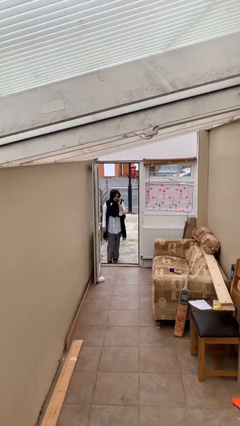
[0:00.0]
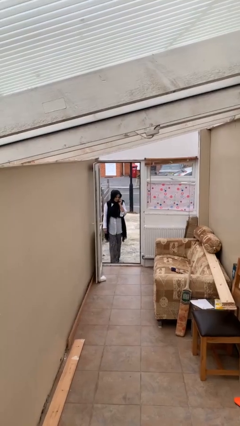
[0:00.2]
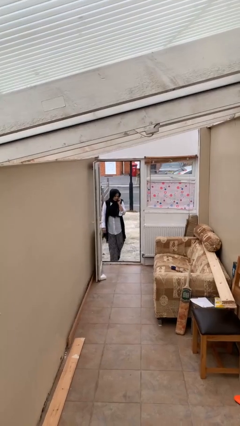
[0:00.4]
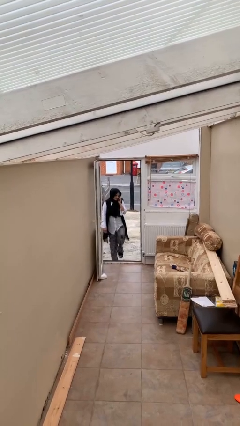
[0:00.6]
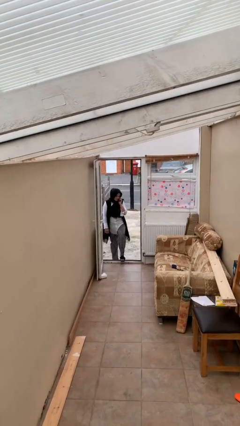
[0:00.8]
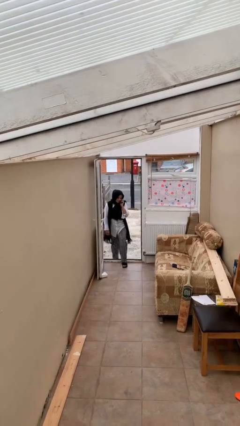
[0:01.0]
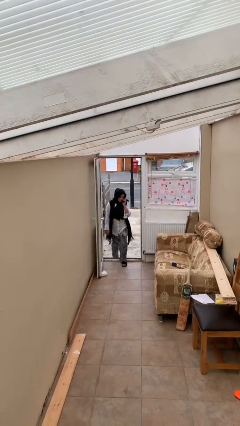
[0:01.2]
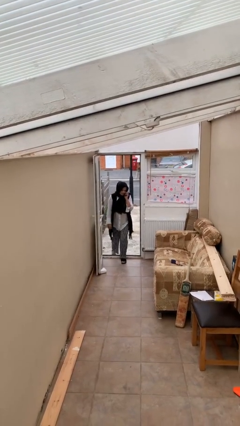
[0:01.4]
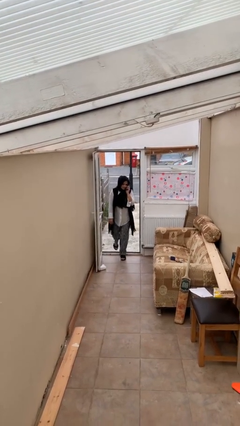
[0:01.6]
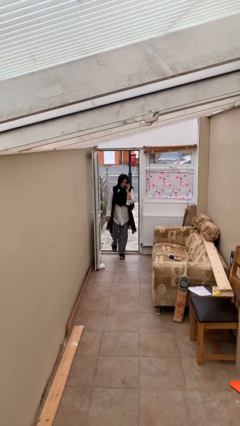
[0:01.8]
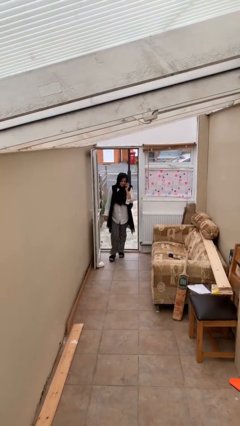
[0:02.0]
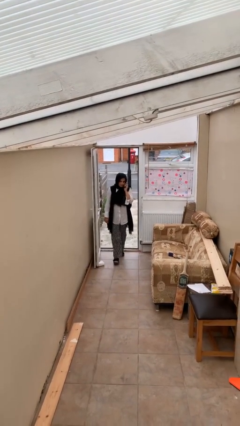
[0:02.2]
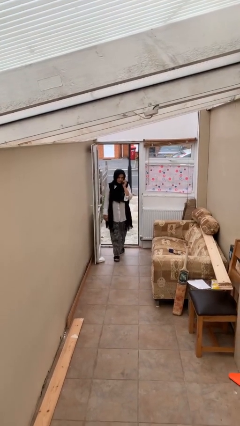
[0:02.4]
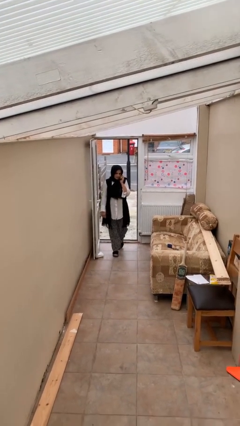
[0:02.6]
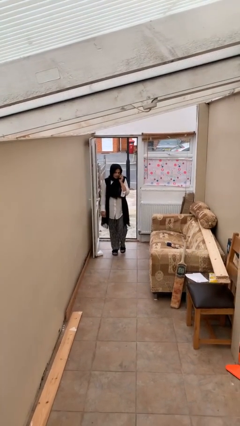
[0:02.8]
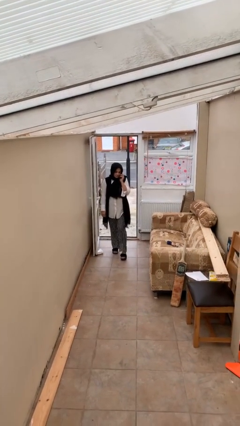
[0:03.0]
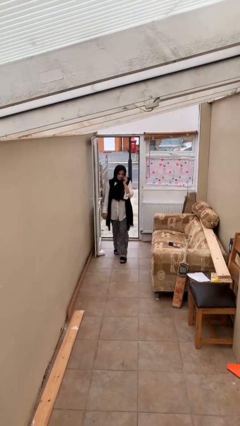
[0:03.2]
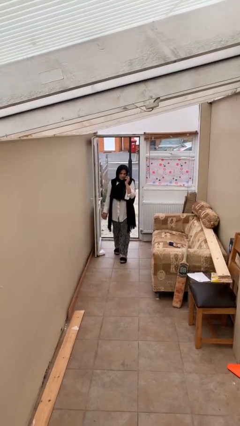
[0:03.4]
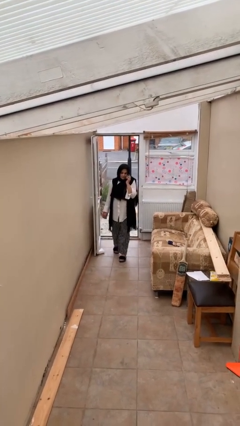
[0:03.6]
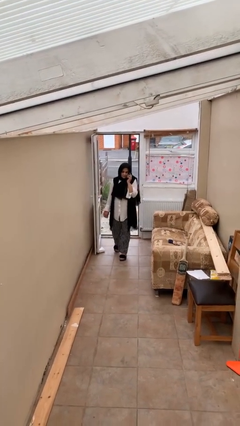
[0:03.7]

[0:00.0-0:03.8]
person enters scene through structure

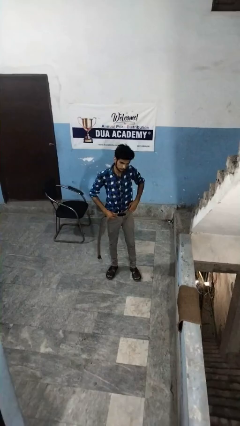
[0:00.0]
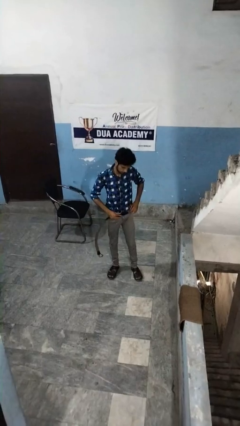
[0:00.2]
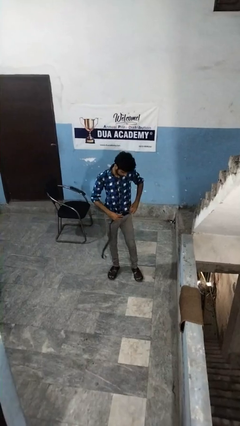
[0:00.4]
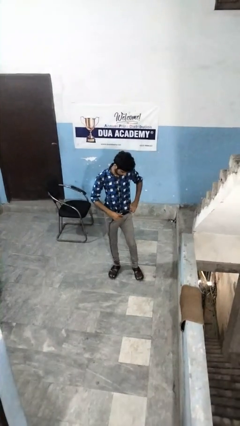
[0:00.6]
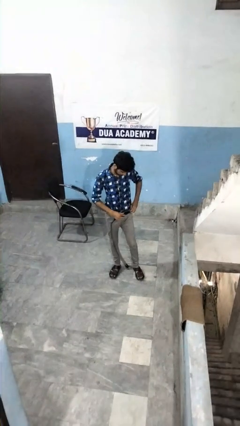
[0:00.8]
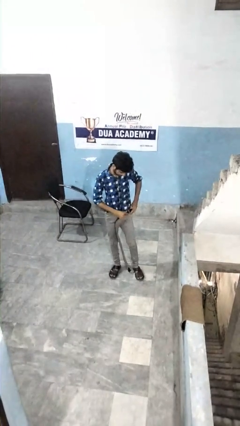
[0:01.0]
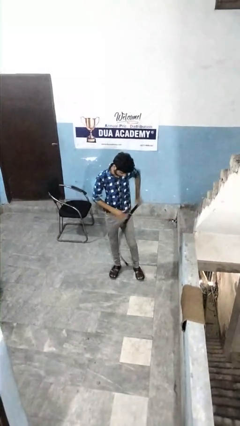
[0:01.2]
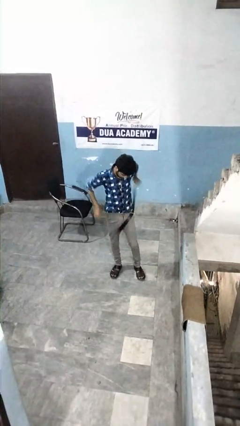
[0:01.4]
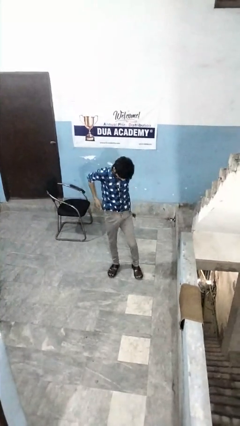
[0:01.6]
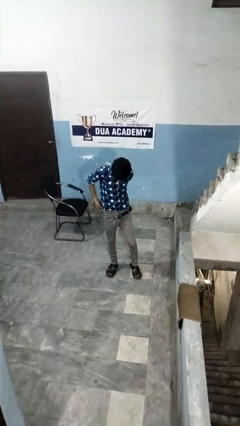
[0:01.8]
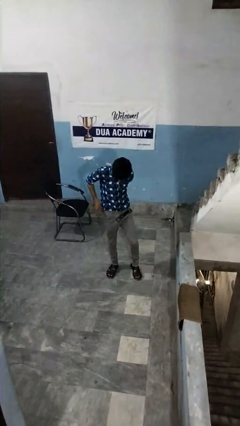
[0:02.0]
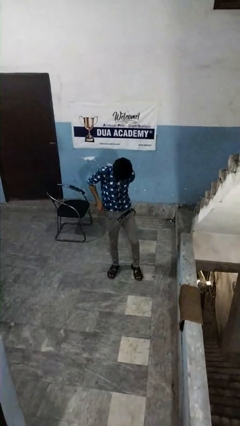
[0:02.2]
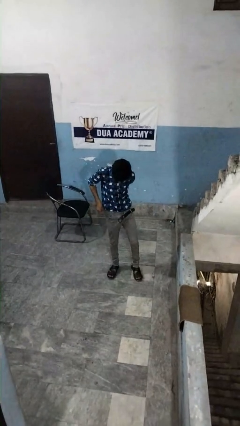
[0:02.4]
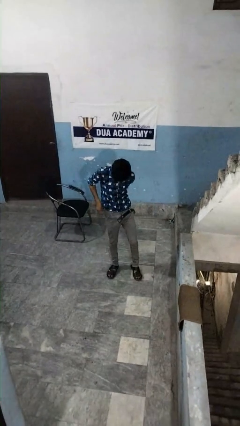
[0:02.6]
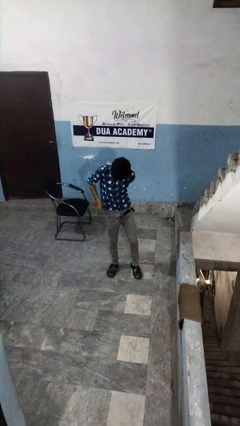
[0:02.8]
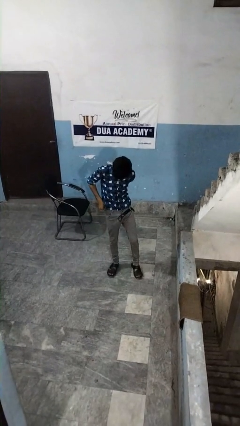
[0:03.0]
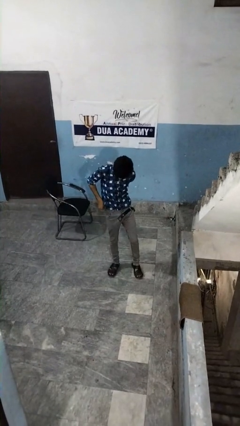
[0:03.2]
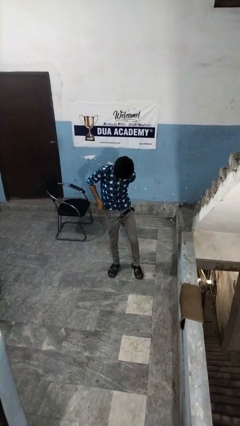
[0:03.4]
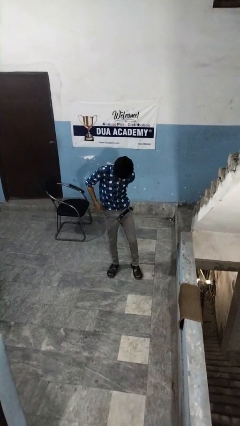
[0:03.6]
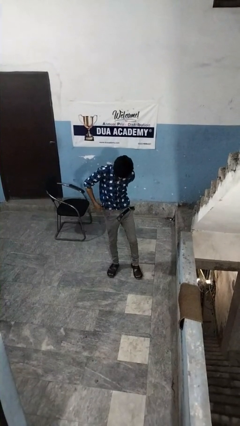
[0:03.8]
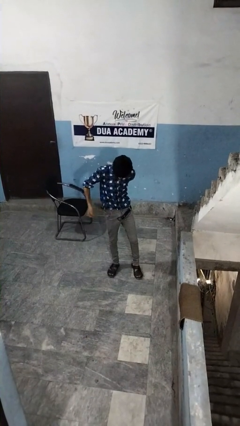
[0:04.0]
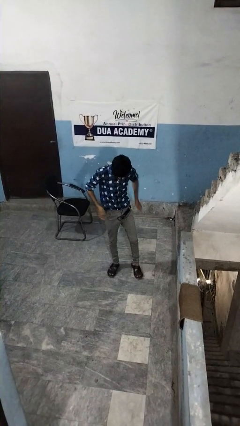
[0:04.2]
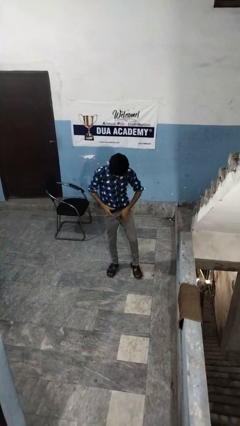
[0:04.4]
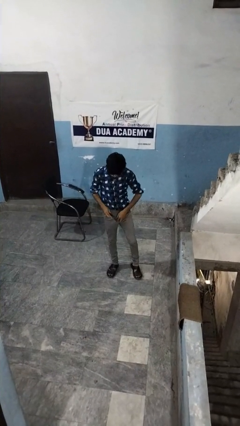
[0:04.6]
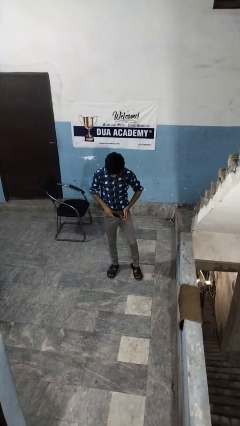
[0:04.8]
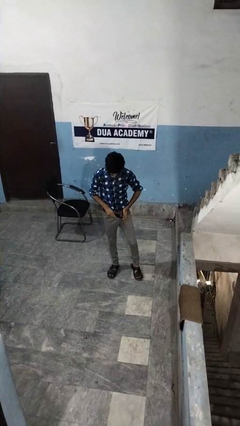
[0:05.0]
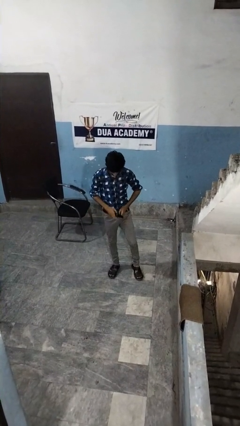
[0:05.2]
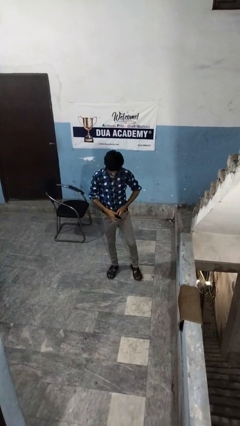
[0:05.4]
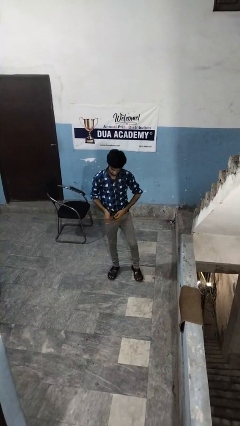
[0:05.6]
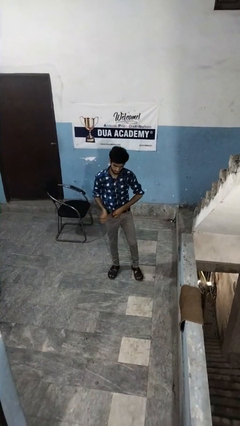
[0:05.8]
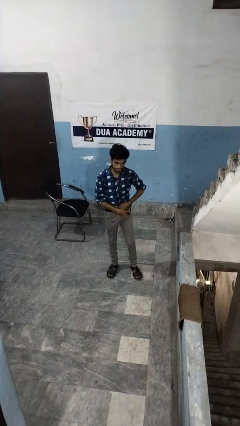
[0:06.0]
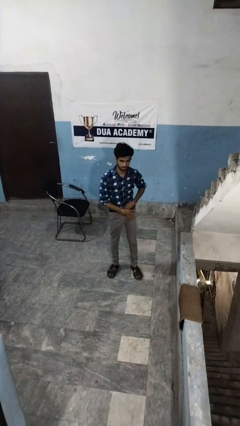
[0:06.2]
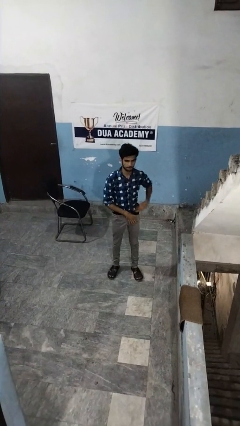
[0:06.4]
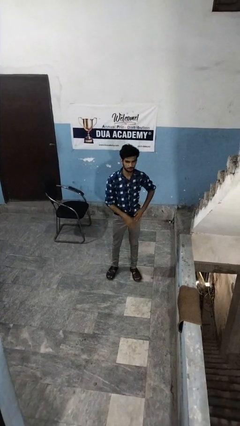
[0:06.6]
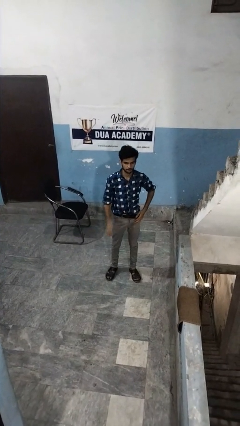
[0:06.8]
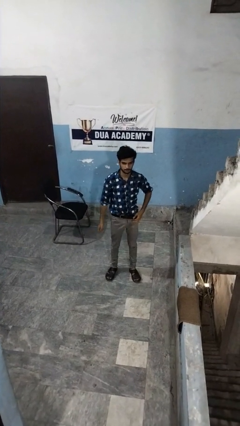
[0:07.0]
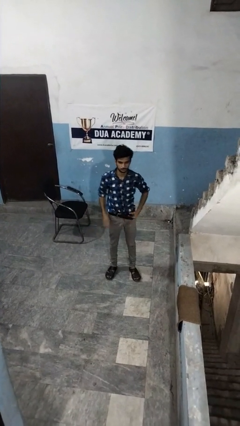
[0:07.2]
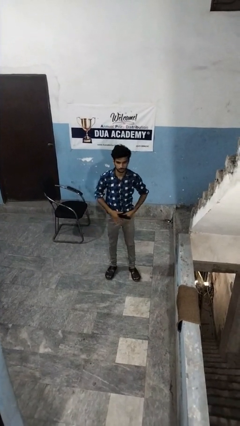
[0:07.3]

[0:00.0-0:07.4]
person puts on belt

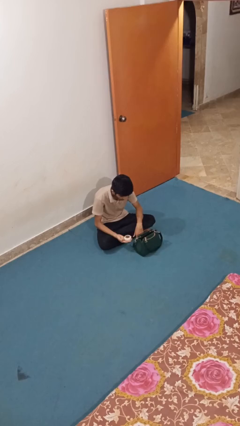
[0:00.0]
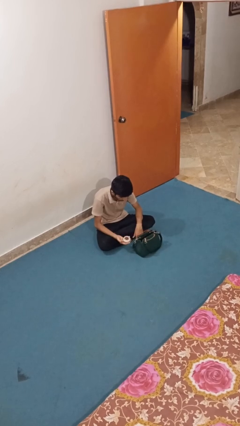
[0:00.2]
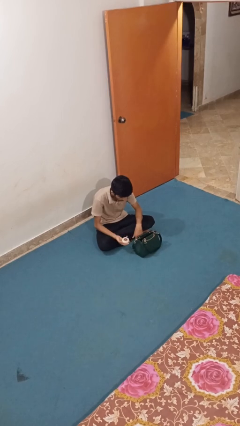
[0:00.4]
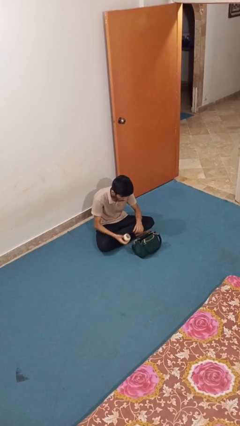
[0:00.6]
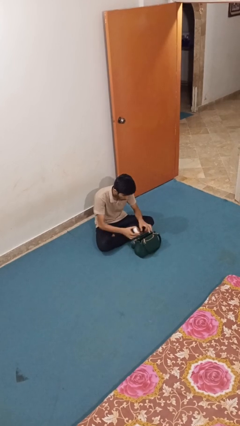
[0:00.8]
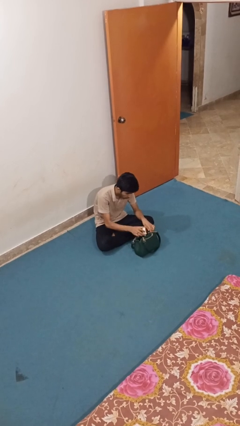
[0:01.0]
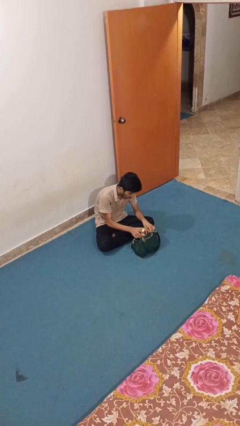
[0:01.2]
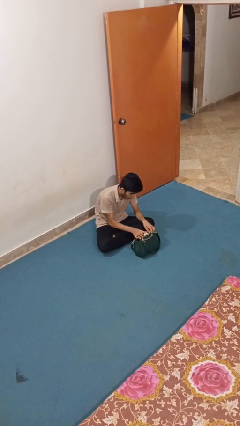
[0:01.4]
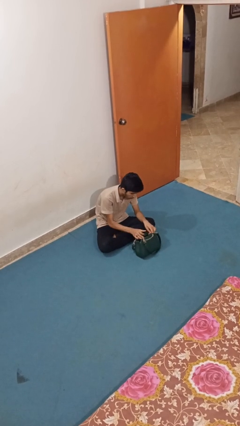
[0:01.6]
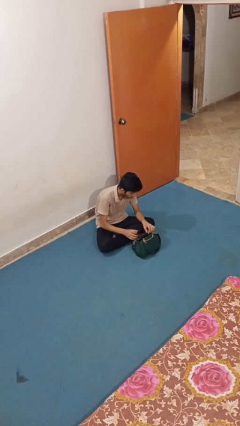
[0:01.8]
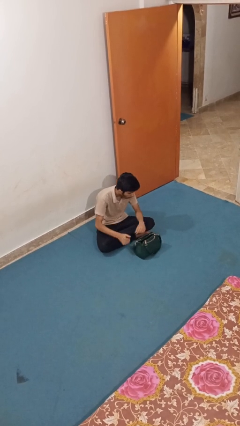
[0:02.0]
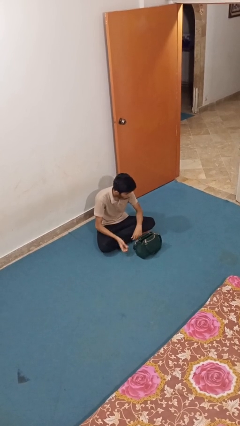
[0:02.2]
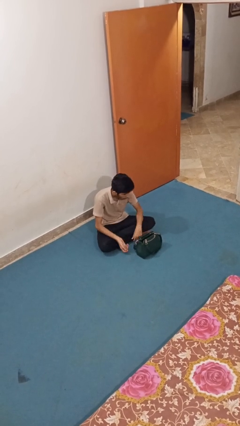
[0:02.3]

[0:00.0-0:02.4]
person puts object into purse

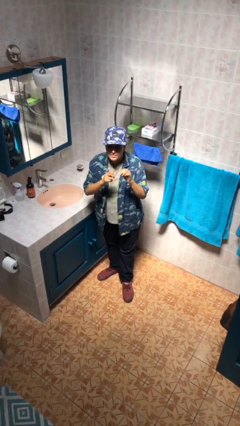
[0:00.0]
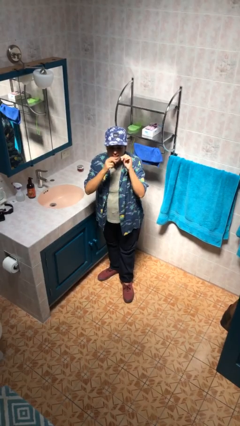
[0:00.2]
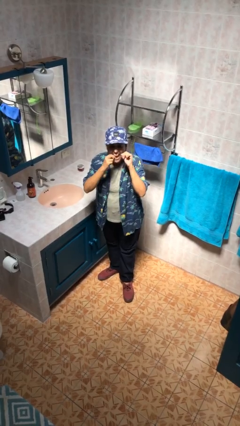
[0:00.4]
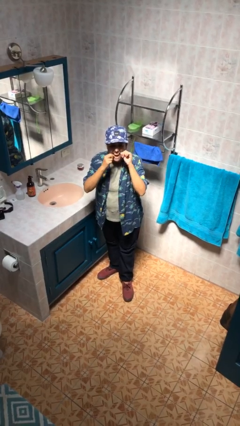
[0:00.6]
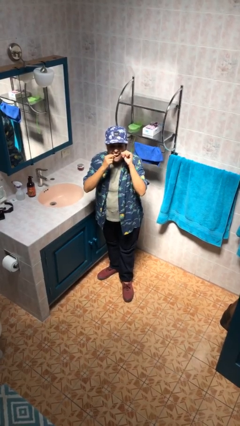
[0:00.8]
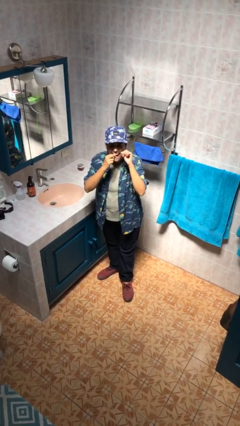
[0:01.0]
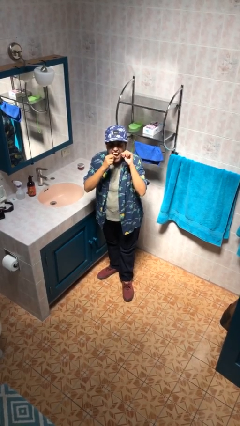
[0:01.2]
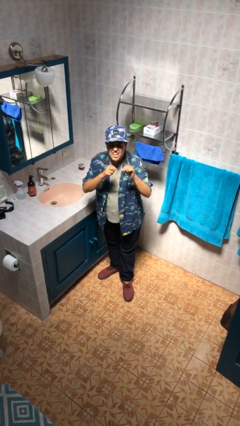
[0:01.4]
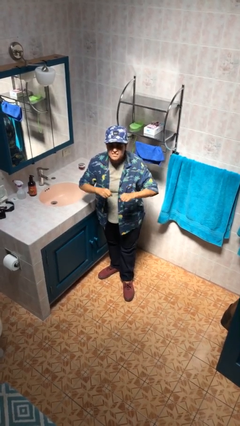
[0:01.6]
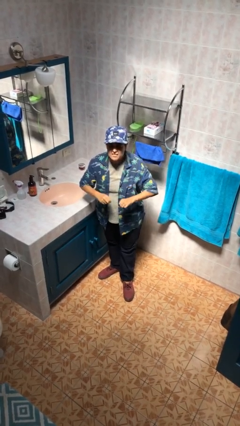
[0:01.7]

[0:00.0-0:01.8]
person flosses

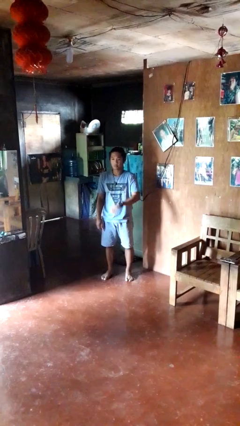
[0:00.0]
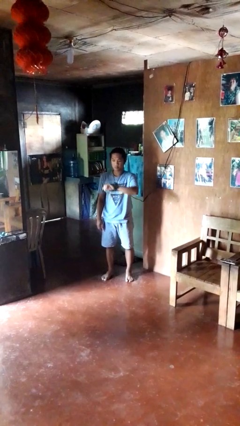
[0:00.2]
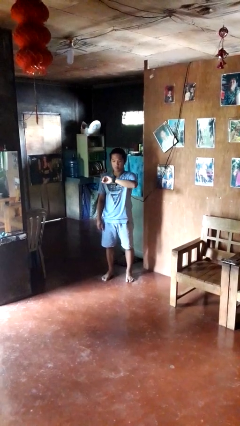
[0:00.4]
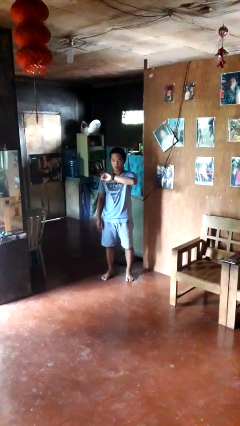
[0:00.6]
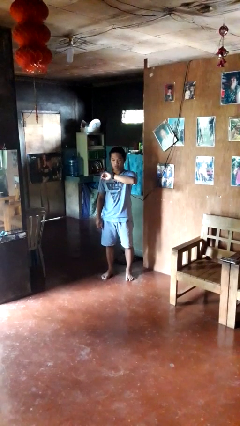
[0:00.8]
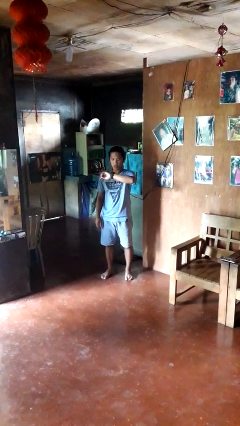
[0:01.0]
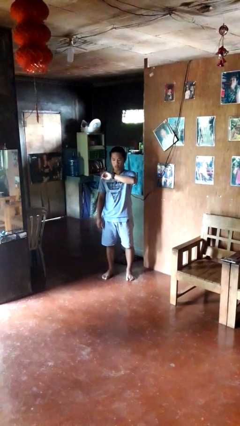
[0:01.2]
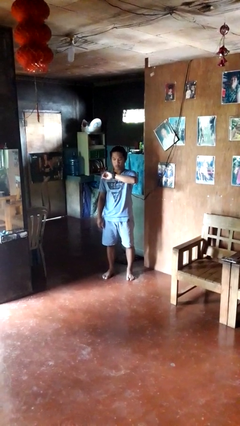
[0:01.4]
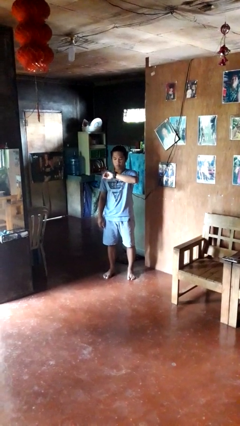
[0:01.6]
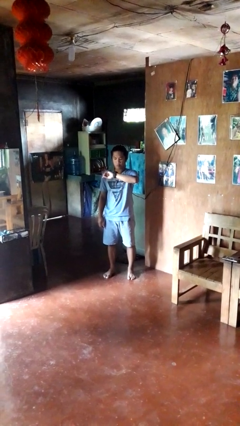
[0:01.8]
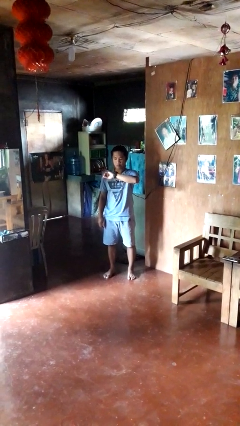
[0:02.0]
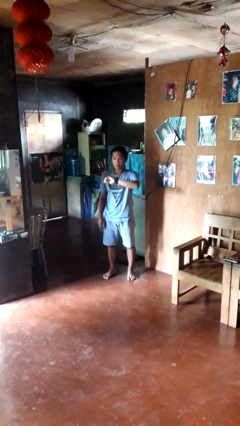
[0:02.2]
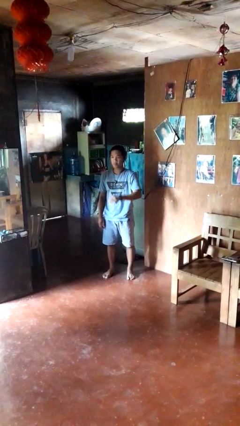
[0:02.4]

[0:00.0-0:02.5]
person looks at wristwatch
